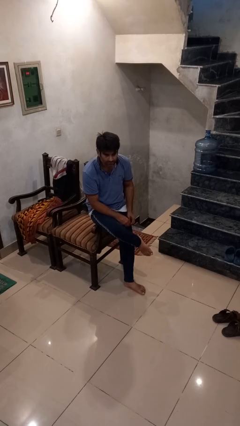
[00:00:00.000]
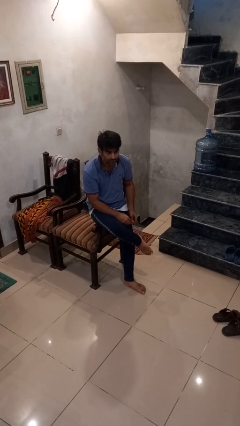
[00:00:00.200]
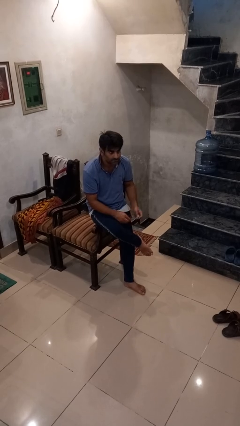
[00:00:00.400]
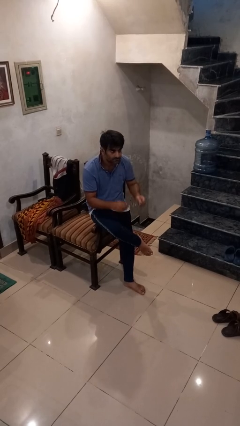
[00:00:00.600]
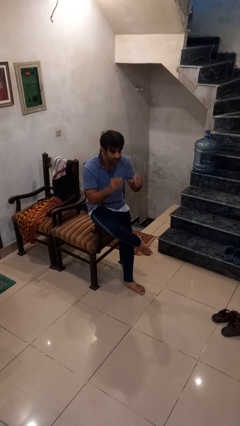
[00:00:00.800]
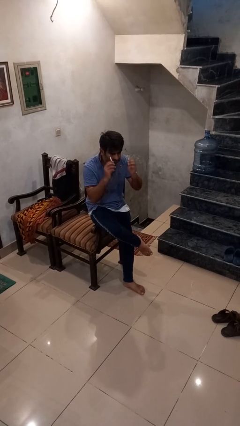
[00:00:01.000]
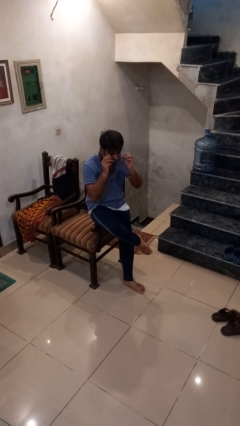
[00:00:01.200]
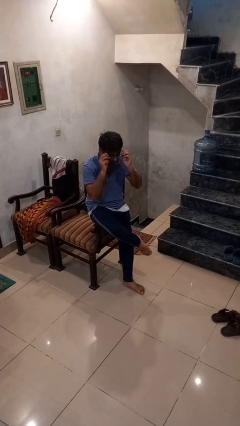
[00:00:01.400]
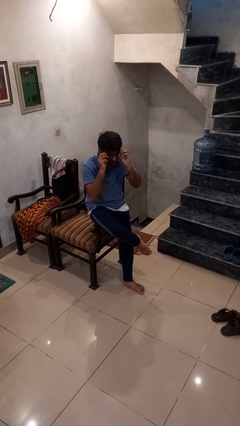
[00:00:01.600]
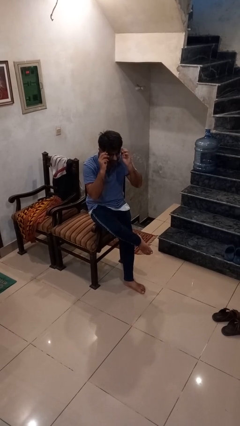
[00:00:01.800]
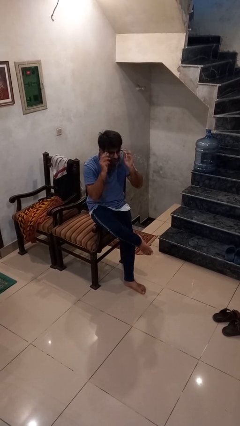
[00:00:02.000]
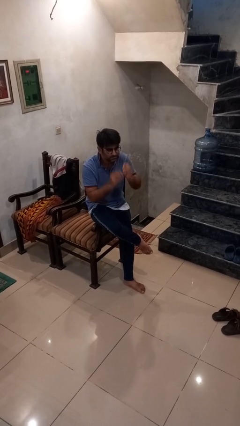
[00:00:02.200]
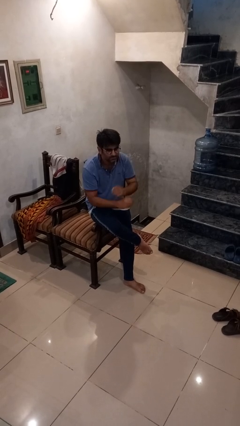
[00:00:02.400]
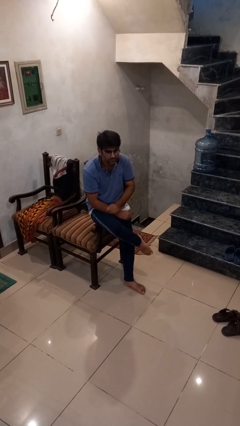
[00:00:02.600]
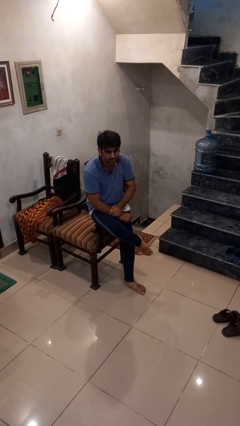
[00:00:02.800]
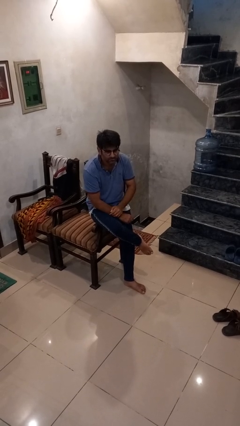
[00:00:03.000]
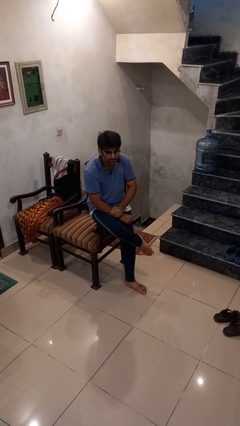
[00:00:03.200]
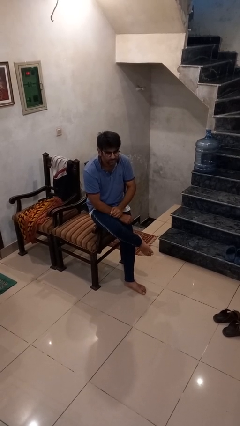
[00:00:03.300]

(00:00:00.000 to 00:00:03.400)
person puts on glasses

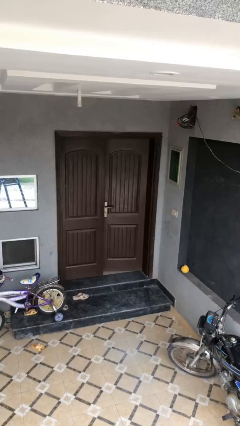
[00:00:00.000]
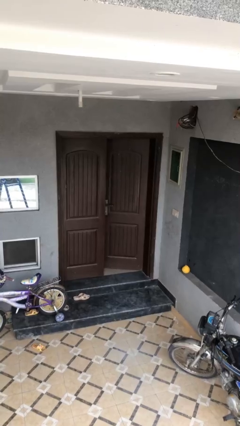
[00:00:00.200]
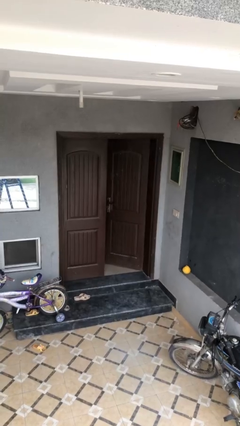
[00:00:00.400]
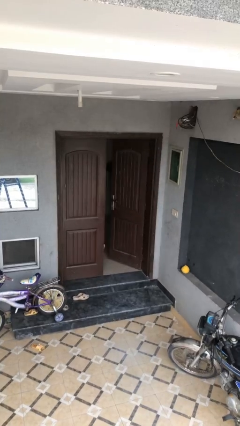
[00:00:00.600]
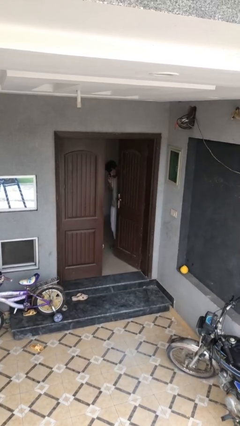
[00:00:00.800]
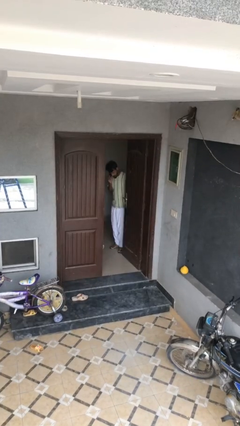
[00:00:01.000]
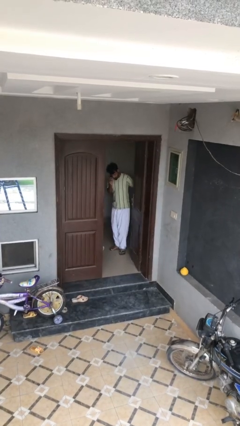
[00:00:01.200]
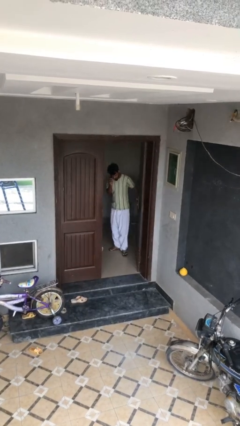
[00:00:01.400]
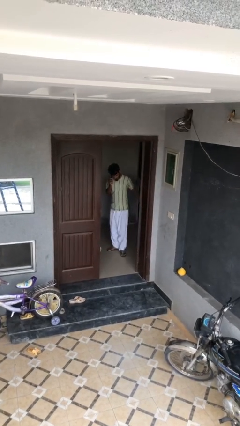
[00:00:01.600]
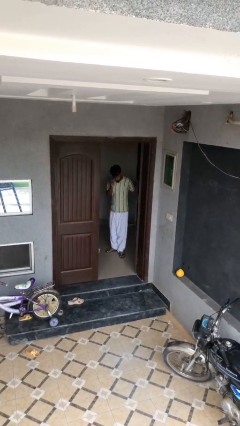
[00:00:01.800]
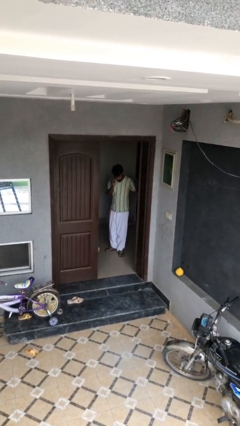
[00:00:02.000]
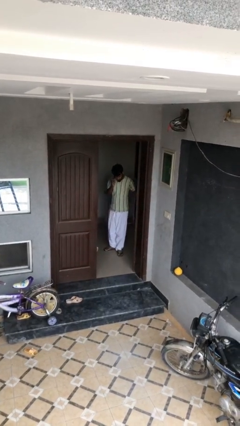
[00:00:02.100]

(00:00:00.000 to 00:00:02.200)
person opens facility door

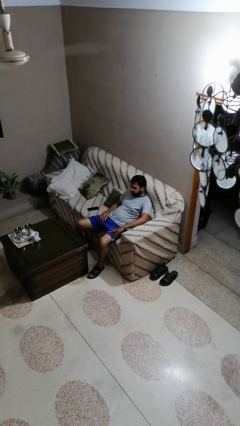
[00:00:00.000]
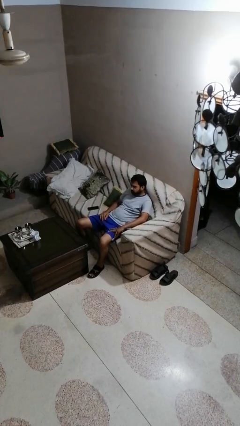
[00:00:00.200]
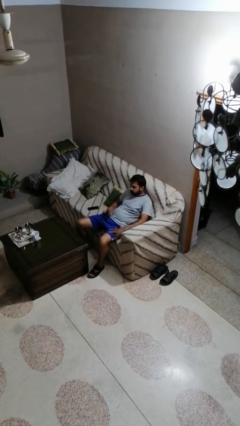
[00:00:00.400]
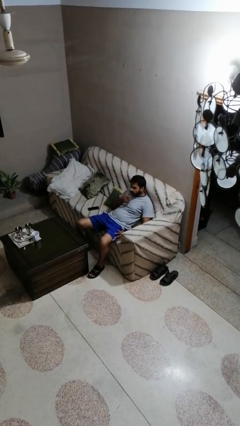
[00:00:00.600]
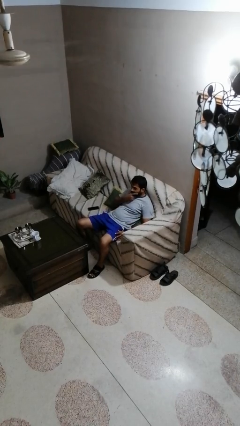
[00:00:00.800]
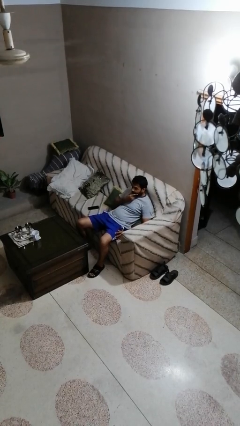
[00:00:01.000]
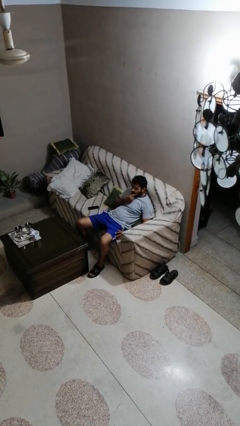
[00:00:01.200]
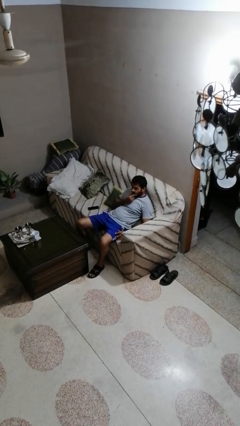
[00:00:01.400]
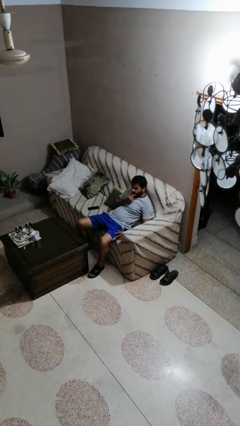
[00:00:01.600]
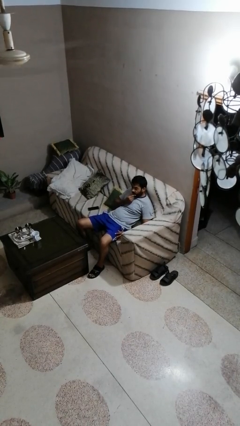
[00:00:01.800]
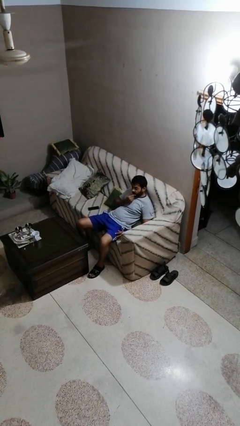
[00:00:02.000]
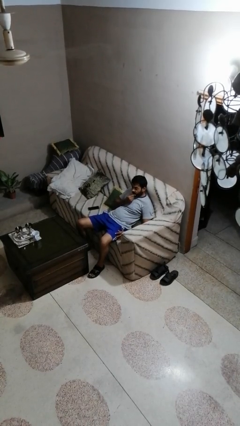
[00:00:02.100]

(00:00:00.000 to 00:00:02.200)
person strokes chin

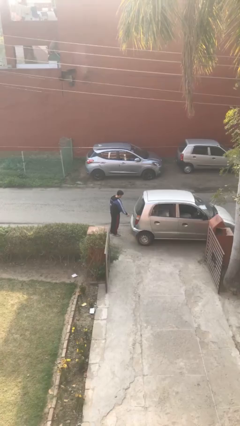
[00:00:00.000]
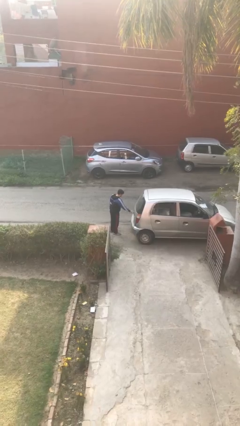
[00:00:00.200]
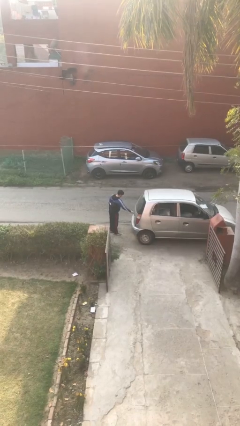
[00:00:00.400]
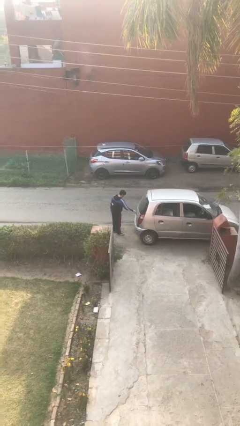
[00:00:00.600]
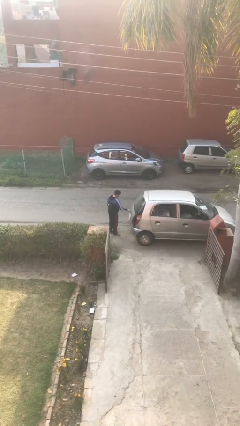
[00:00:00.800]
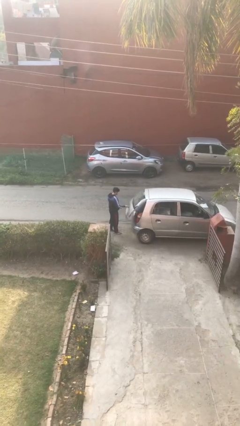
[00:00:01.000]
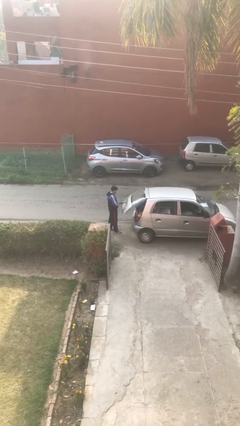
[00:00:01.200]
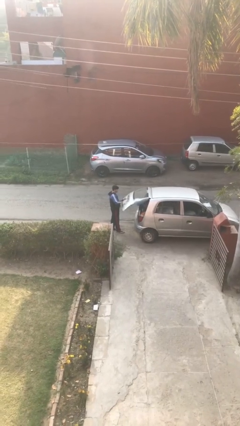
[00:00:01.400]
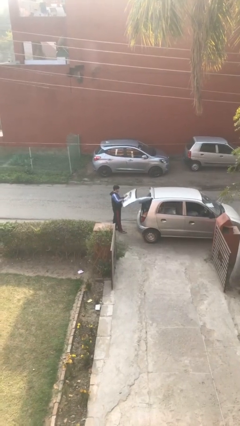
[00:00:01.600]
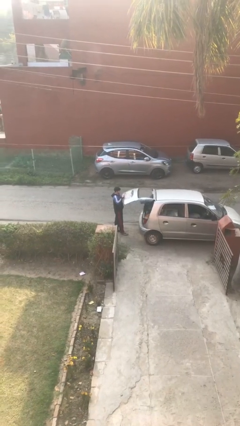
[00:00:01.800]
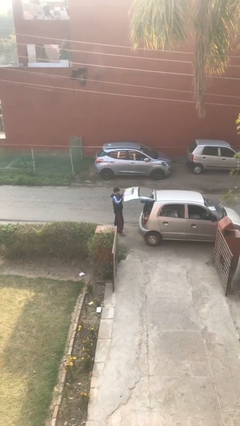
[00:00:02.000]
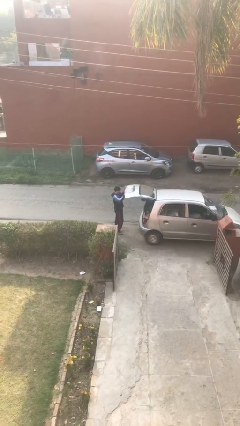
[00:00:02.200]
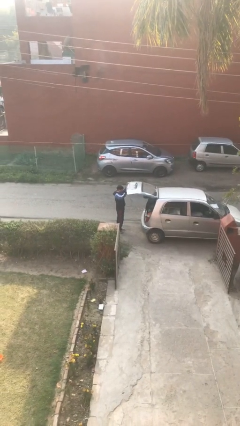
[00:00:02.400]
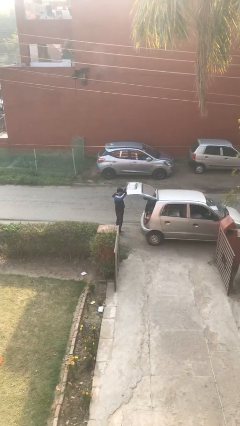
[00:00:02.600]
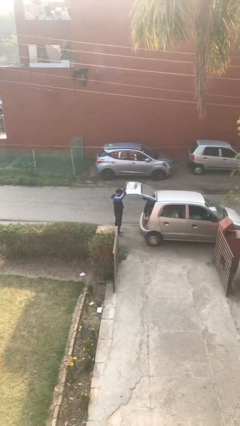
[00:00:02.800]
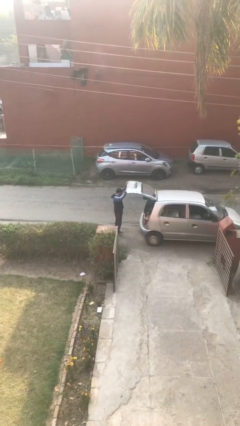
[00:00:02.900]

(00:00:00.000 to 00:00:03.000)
person opens car trunk

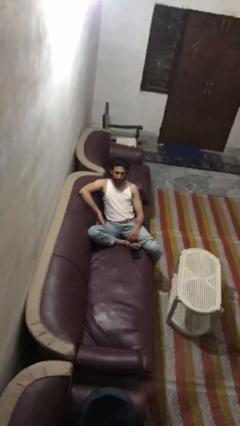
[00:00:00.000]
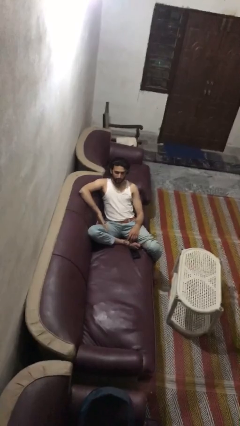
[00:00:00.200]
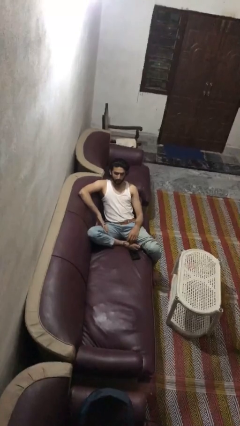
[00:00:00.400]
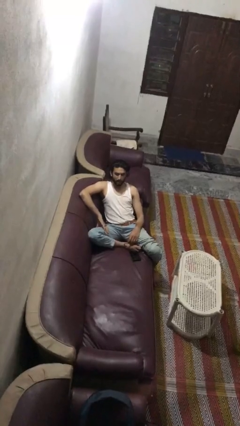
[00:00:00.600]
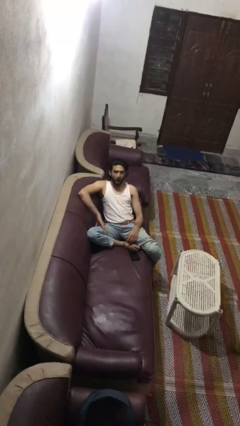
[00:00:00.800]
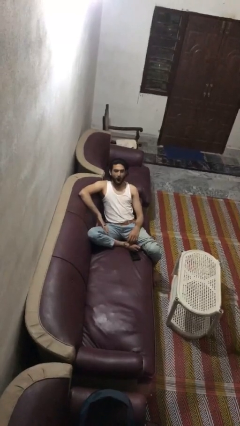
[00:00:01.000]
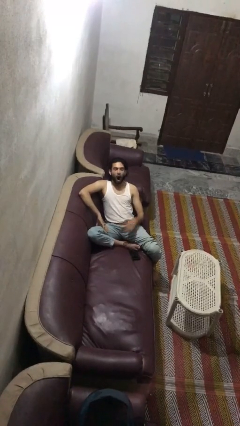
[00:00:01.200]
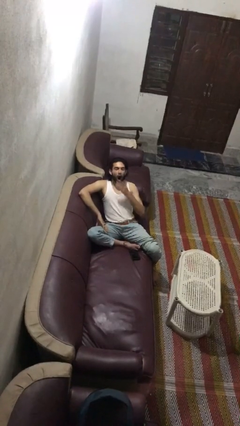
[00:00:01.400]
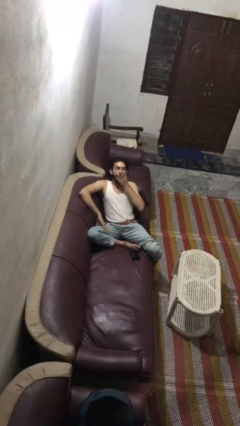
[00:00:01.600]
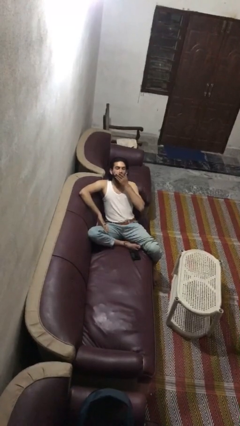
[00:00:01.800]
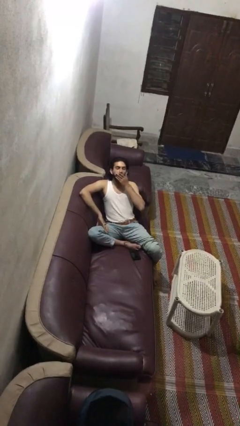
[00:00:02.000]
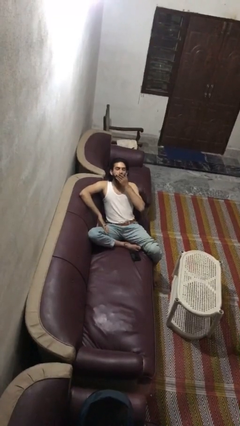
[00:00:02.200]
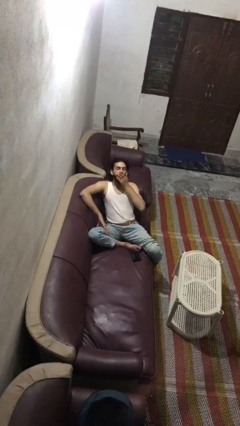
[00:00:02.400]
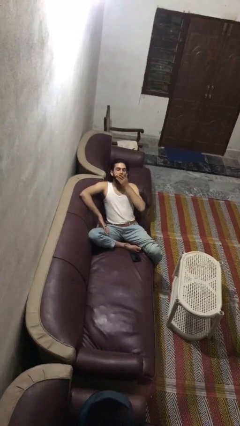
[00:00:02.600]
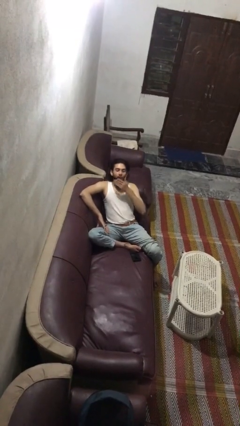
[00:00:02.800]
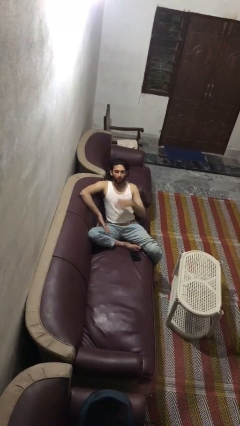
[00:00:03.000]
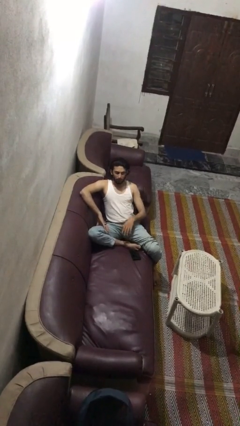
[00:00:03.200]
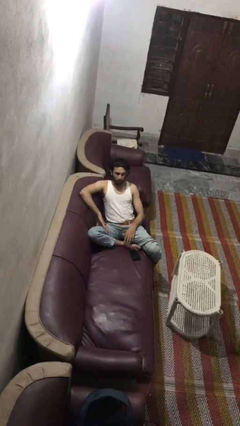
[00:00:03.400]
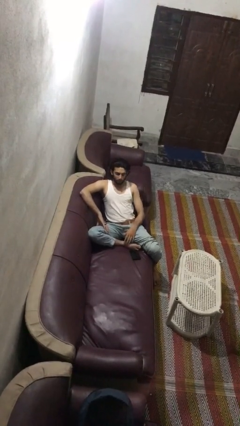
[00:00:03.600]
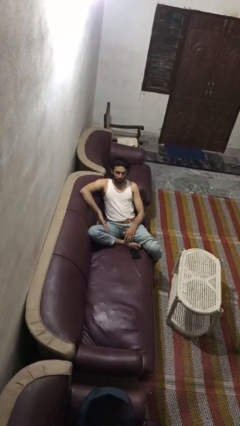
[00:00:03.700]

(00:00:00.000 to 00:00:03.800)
person yawns

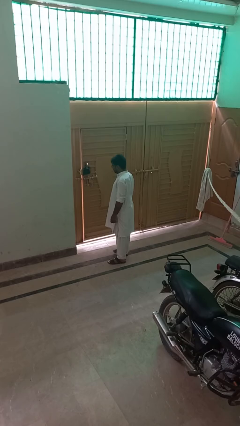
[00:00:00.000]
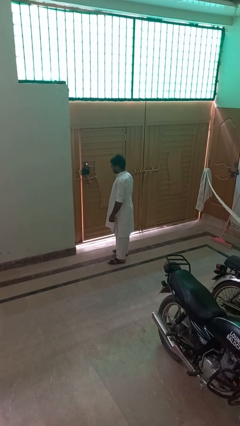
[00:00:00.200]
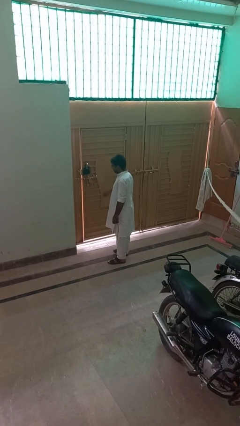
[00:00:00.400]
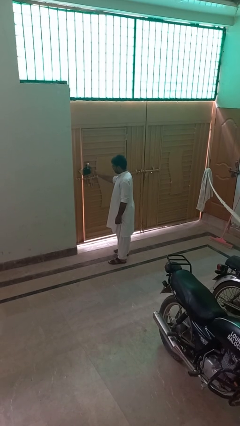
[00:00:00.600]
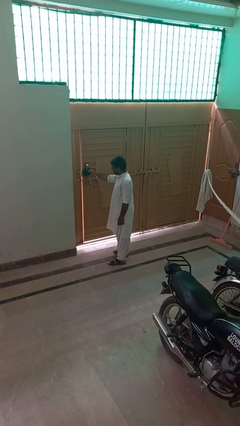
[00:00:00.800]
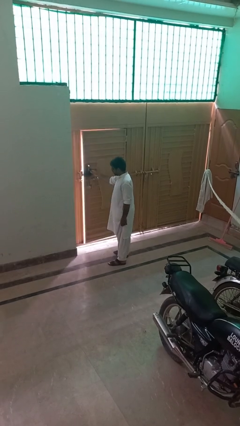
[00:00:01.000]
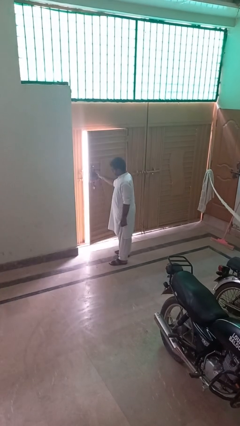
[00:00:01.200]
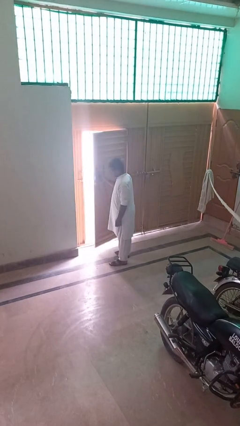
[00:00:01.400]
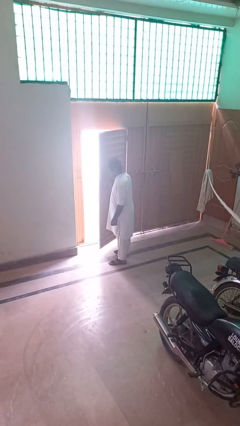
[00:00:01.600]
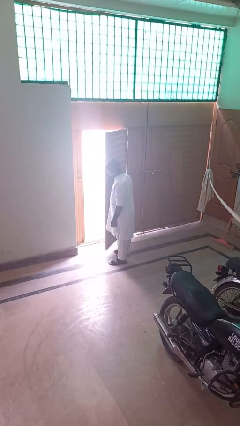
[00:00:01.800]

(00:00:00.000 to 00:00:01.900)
person opens gate

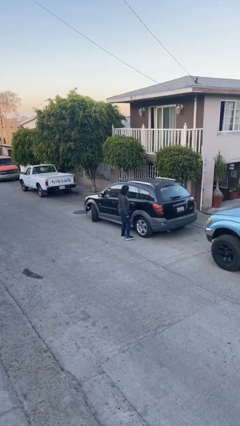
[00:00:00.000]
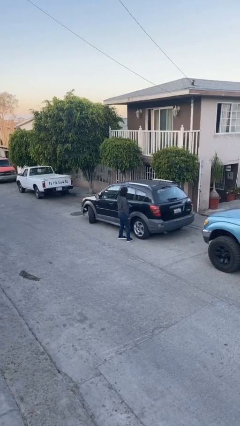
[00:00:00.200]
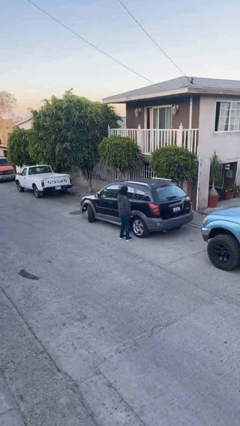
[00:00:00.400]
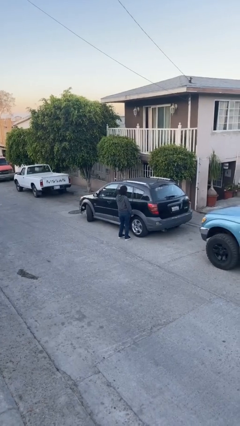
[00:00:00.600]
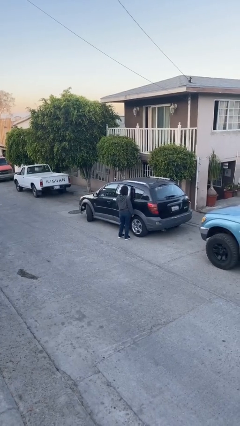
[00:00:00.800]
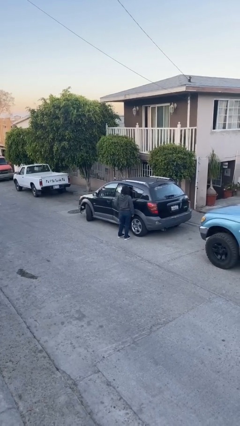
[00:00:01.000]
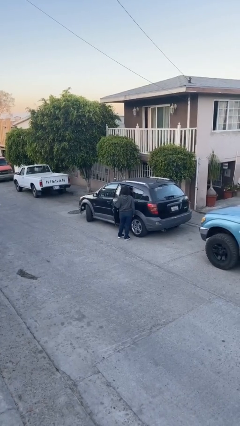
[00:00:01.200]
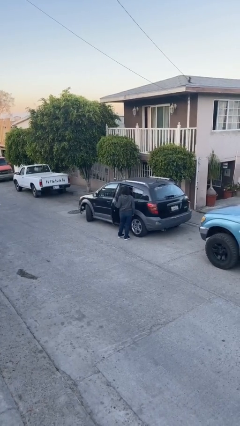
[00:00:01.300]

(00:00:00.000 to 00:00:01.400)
person opens car door
